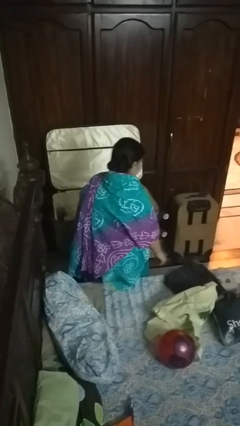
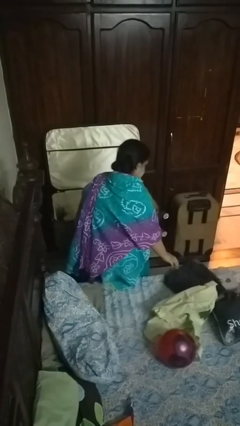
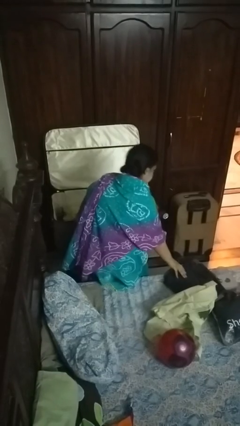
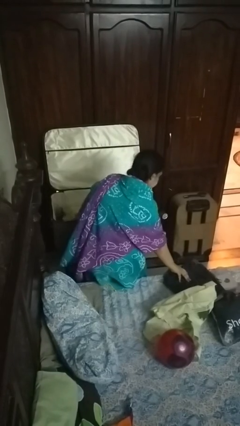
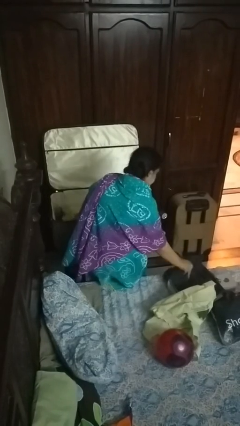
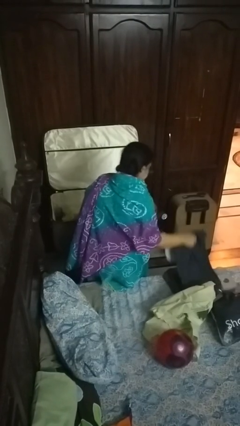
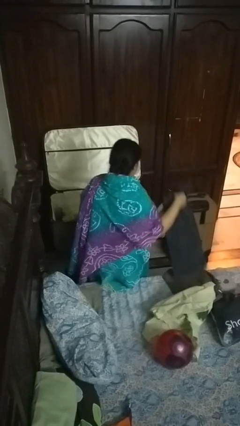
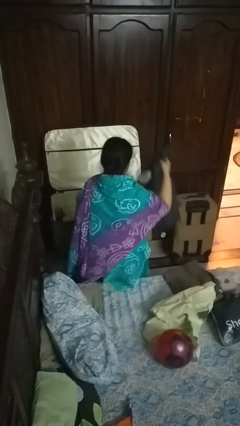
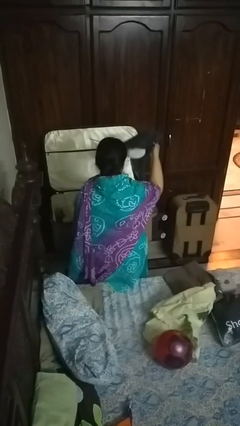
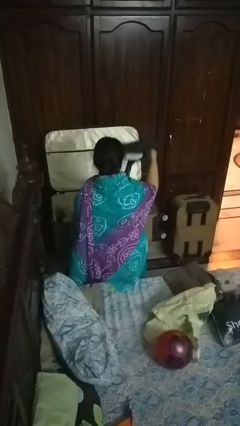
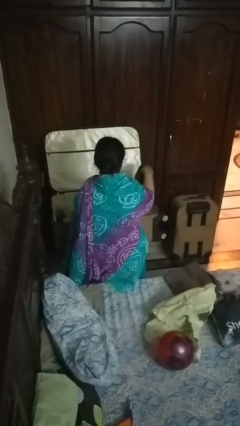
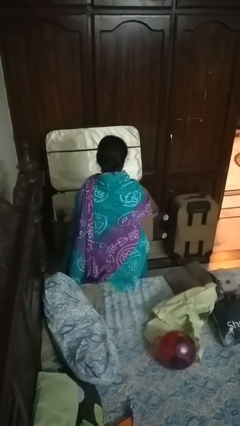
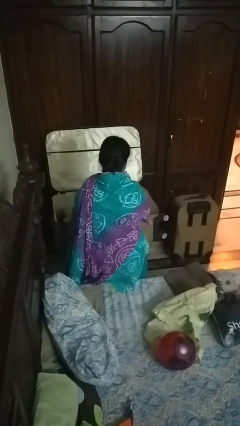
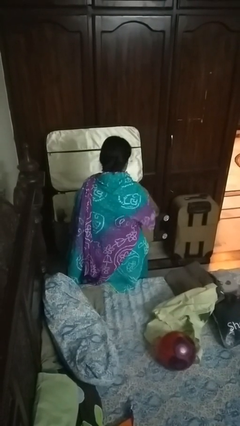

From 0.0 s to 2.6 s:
person loads clothes into suitcase

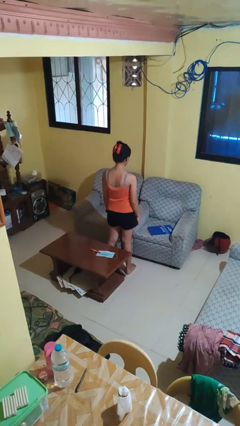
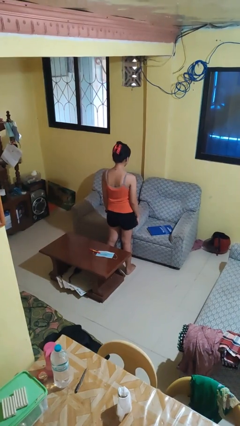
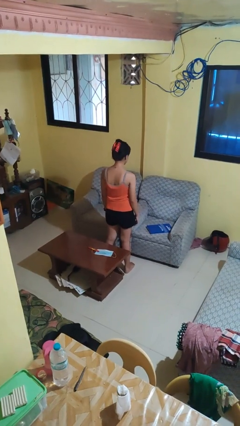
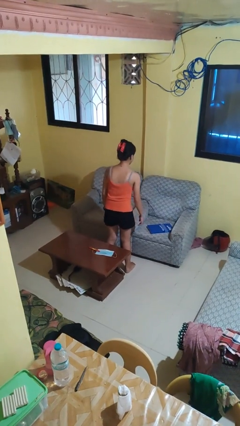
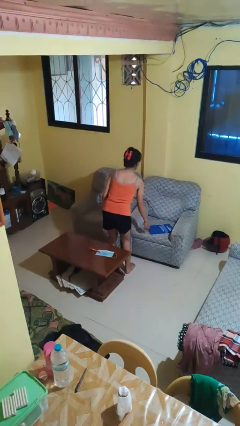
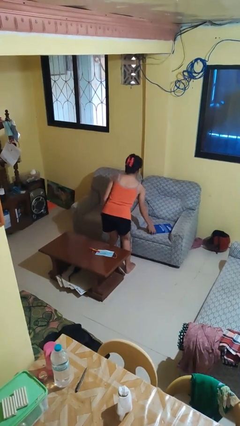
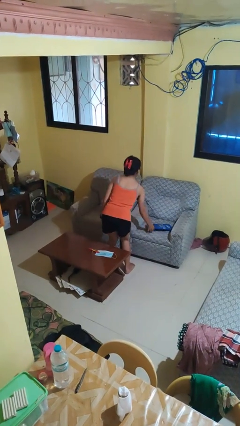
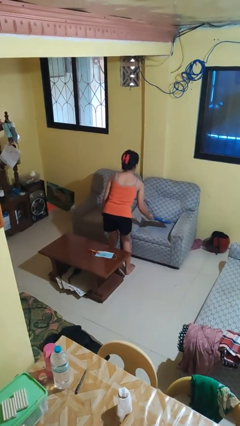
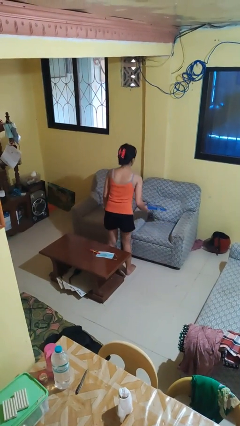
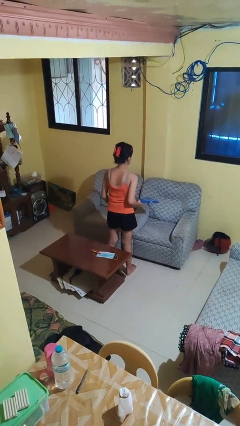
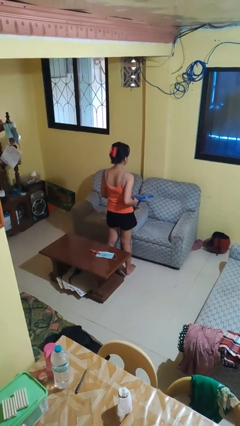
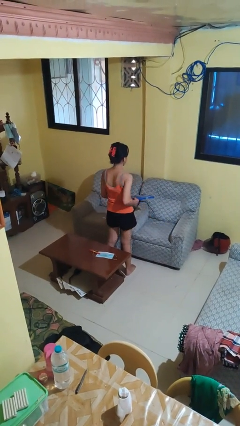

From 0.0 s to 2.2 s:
person picks up object from couch

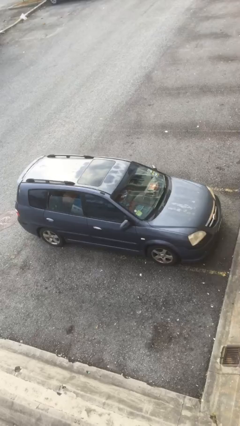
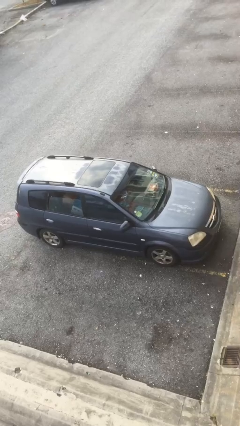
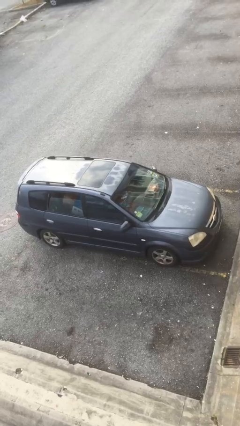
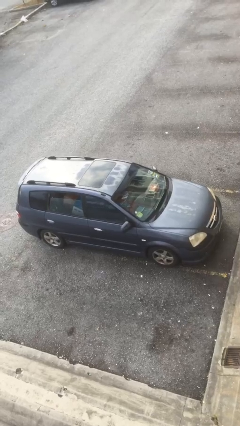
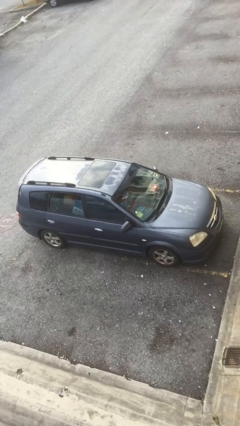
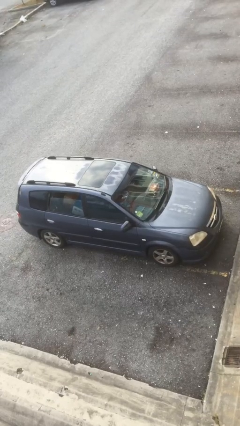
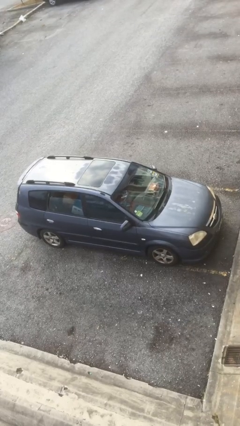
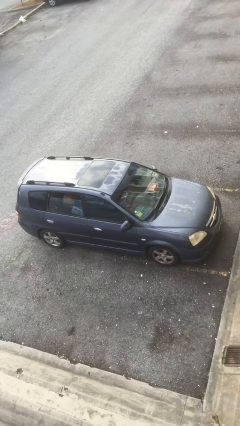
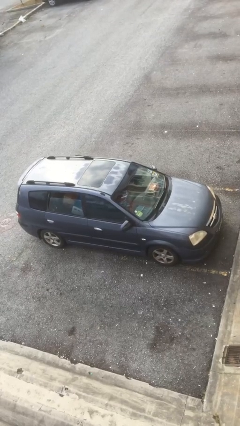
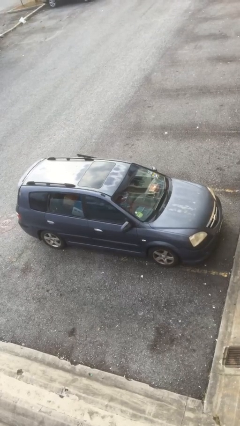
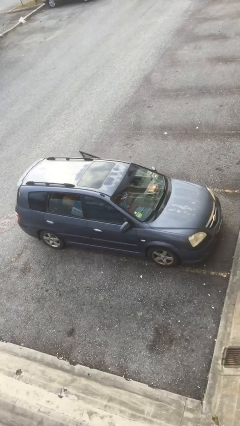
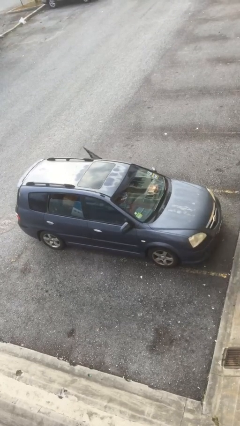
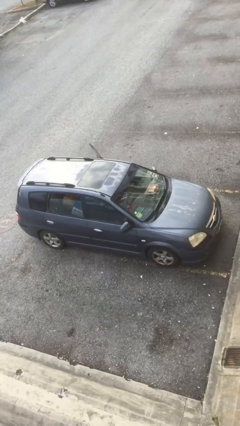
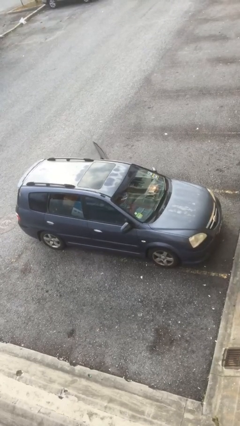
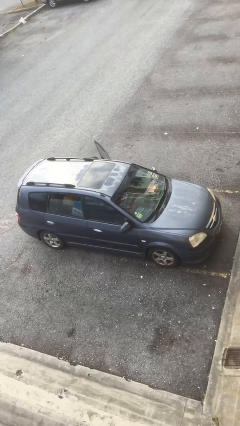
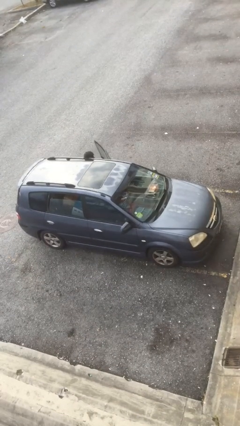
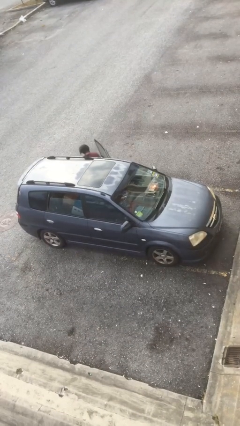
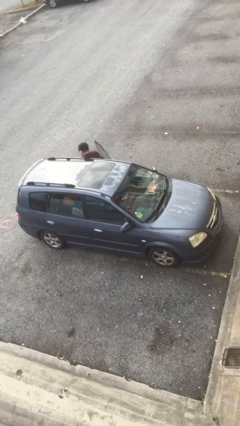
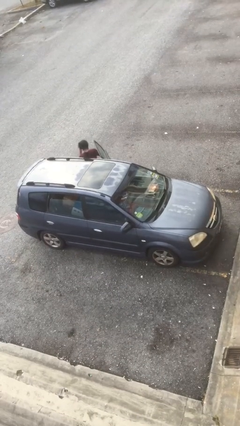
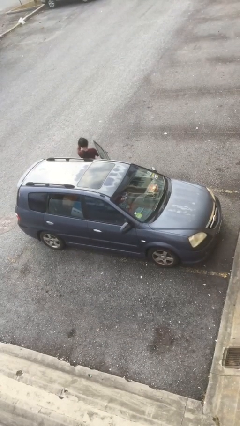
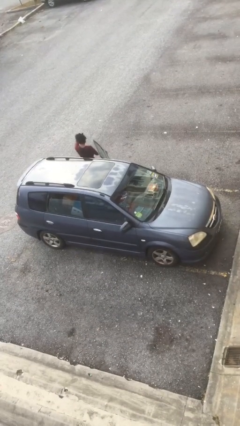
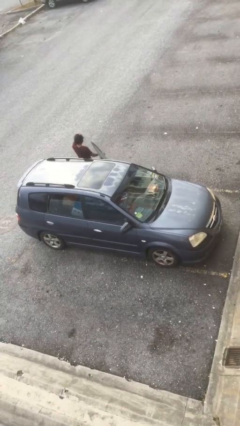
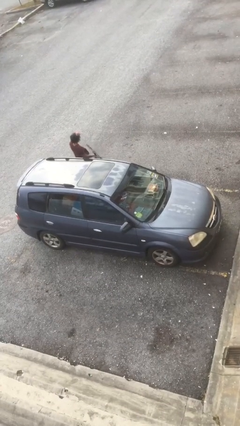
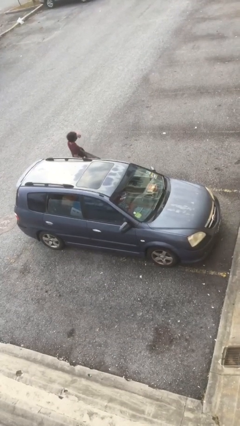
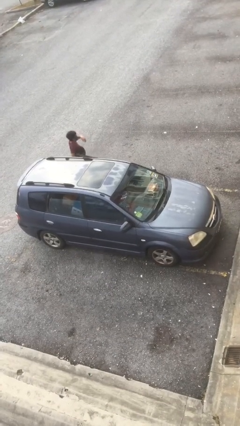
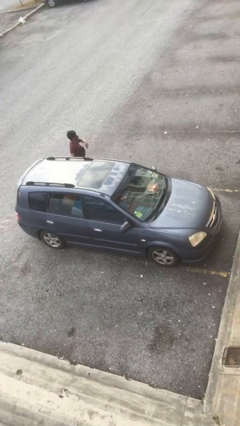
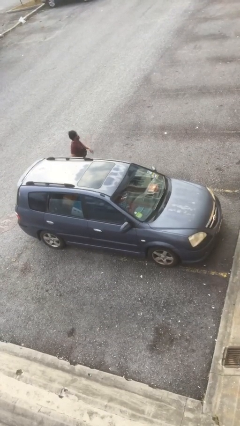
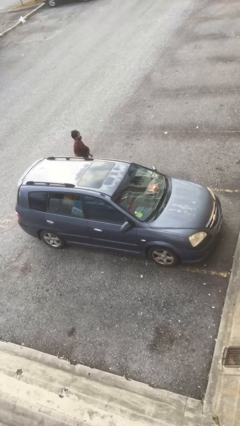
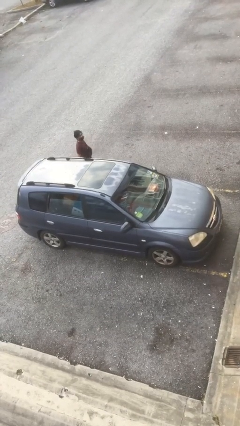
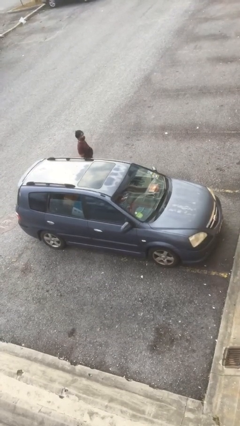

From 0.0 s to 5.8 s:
car drops off person

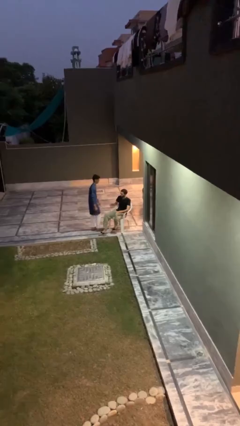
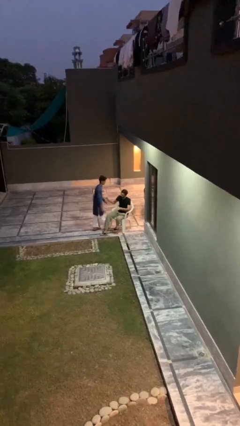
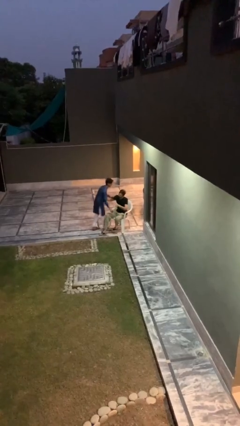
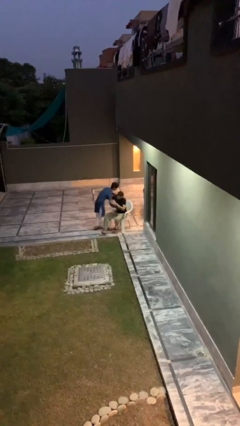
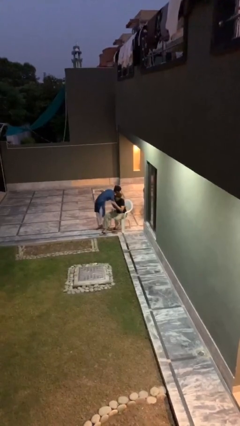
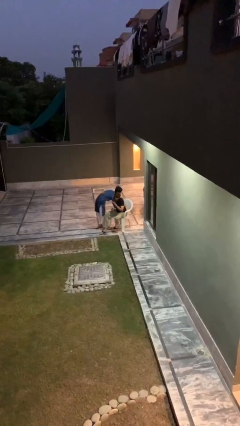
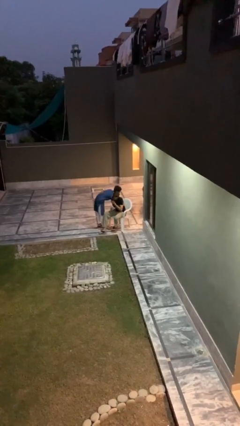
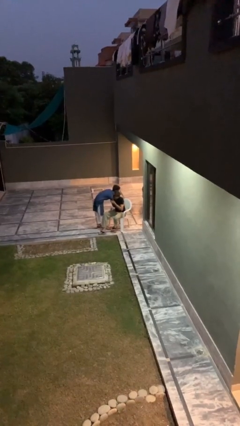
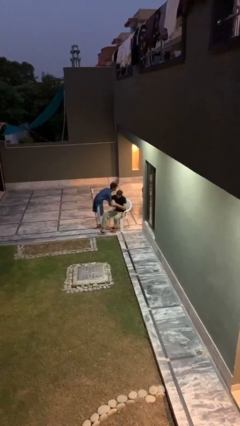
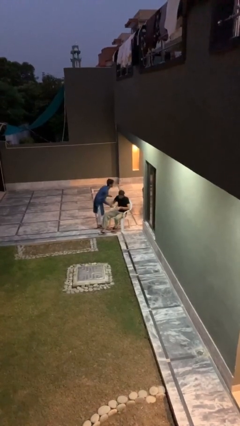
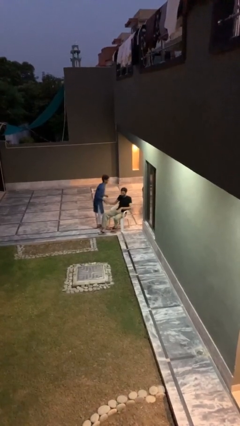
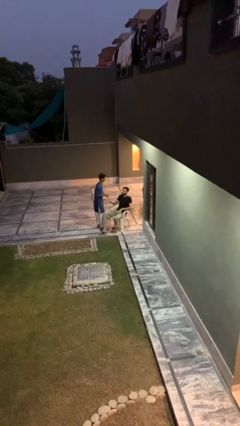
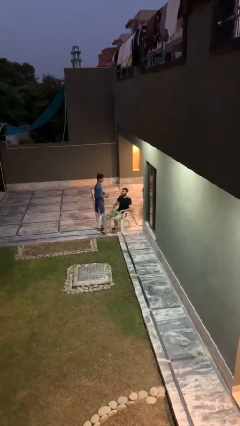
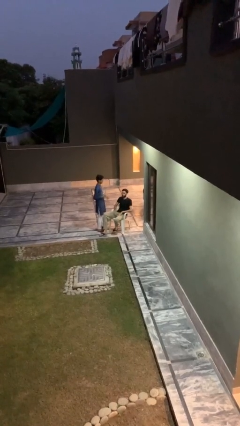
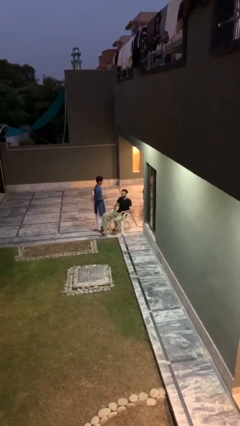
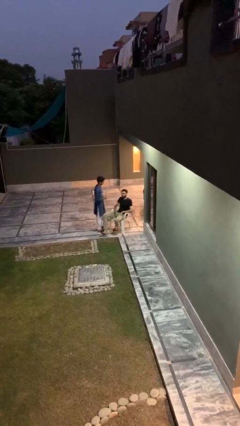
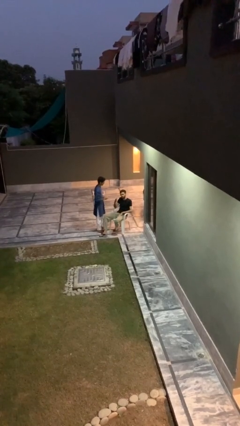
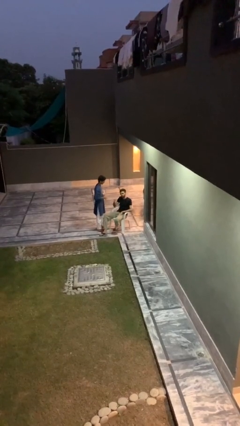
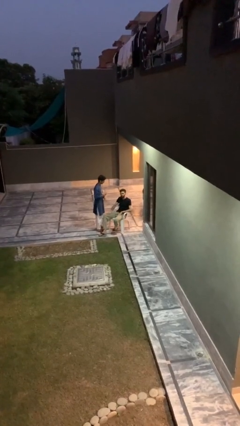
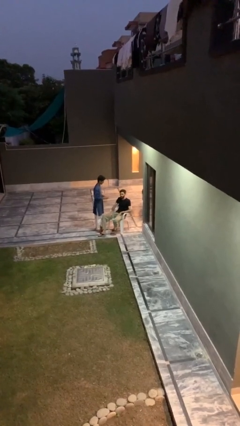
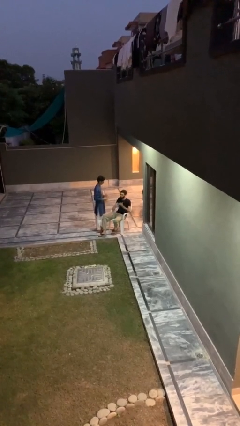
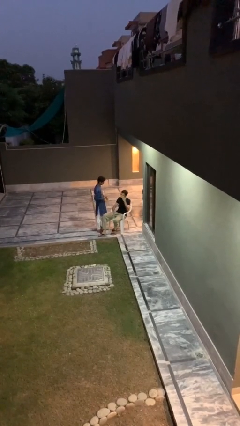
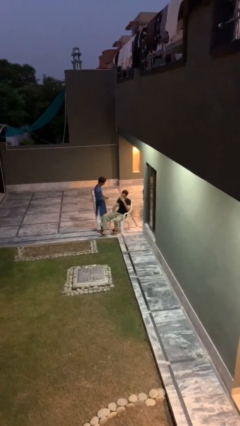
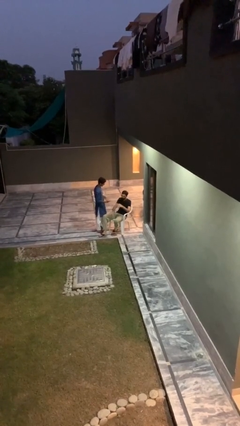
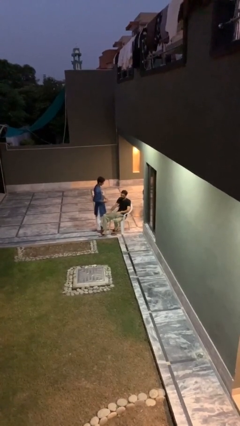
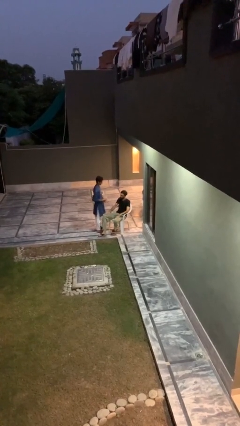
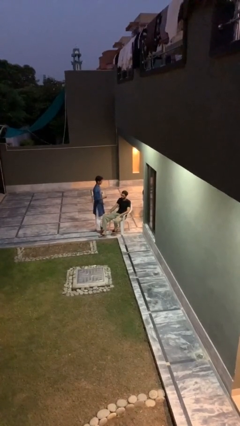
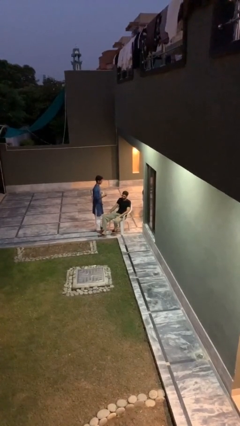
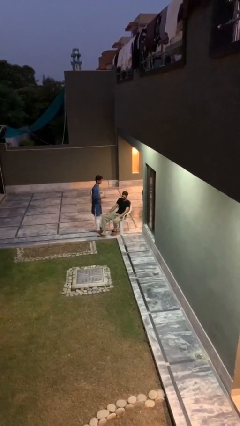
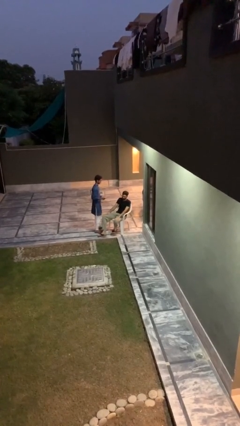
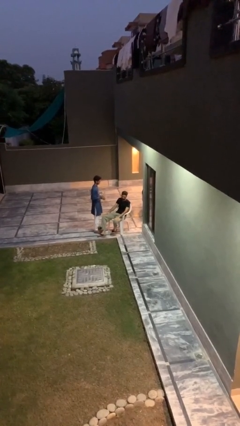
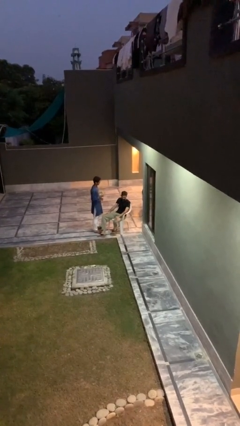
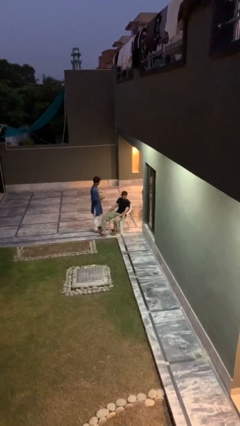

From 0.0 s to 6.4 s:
person embraces person

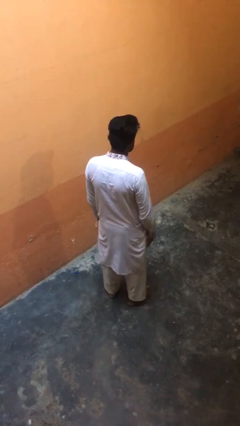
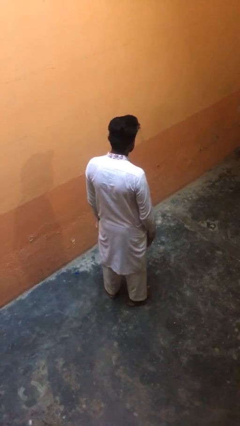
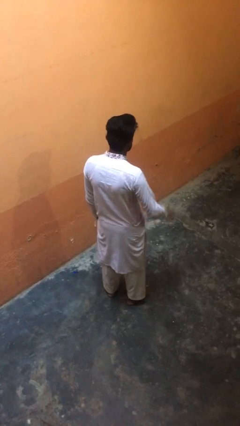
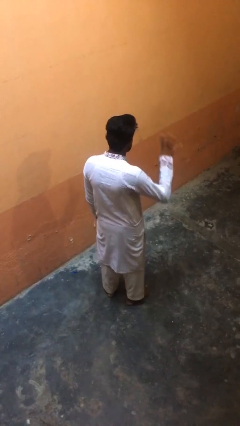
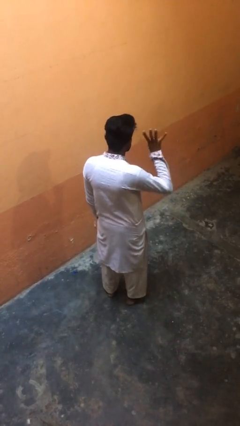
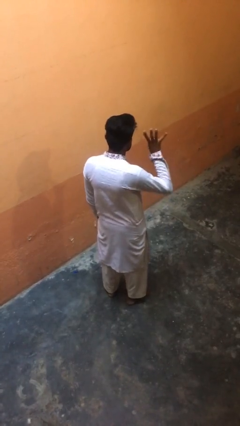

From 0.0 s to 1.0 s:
person gestures number four
